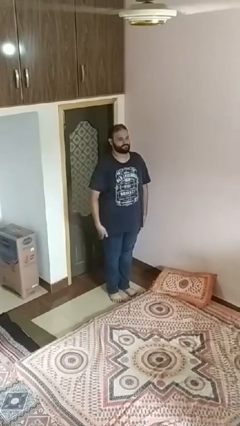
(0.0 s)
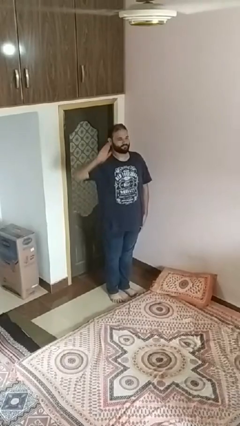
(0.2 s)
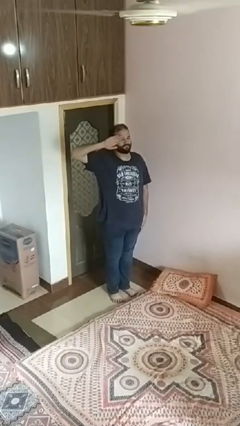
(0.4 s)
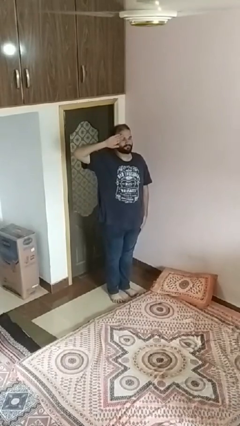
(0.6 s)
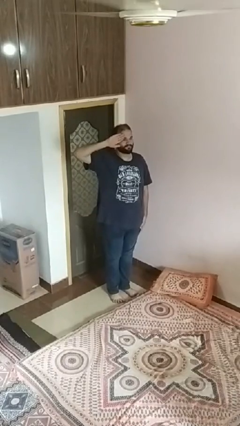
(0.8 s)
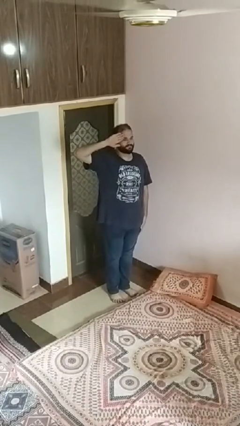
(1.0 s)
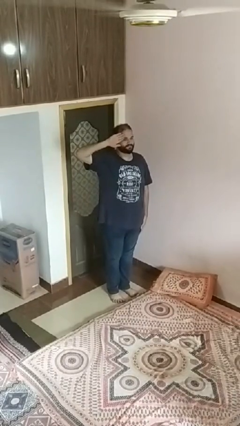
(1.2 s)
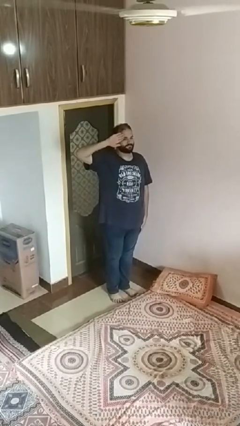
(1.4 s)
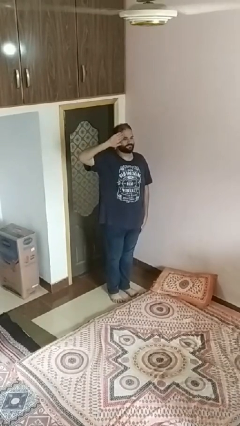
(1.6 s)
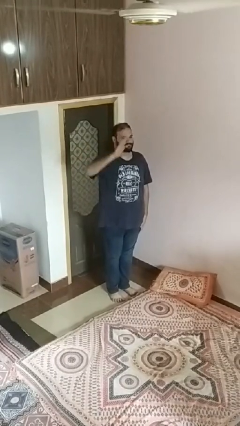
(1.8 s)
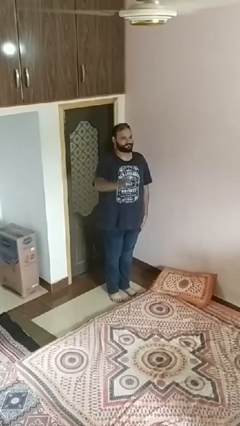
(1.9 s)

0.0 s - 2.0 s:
person salutes

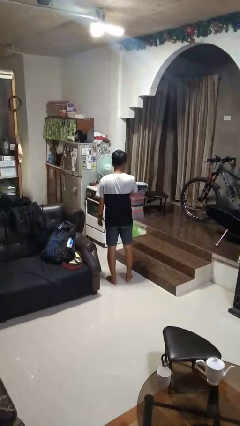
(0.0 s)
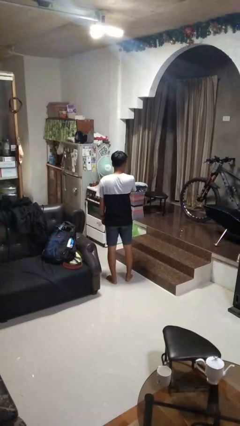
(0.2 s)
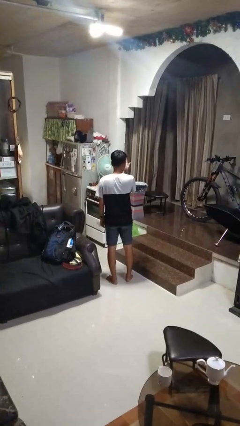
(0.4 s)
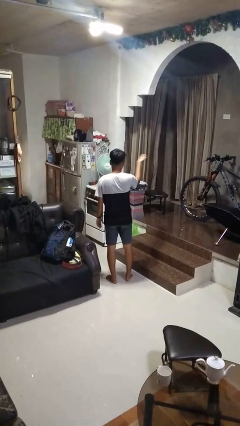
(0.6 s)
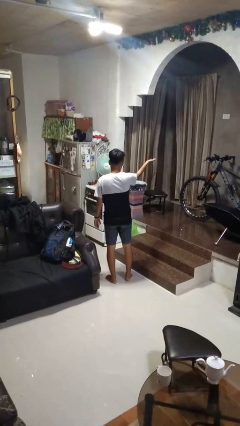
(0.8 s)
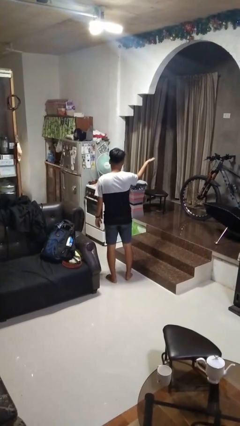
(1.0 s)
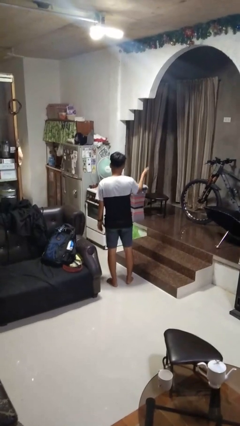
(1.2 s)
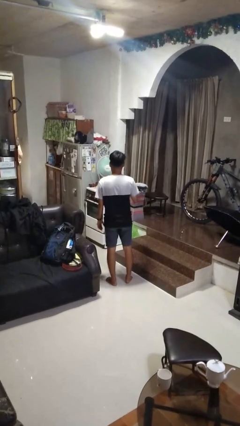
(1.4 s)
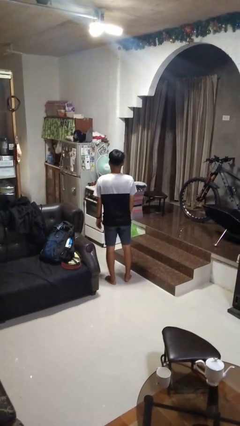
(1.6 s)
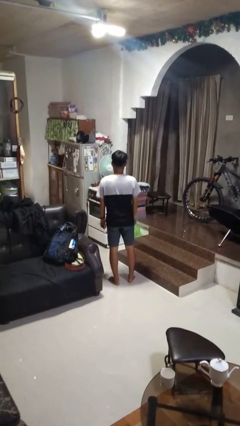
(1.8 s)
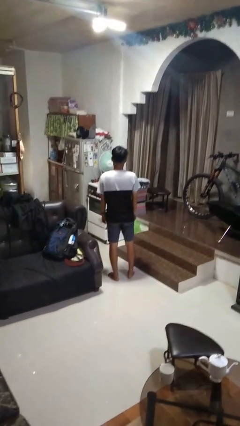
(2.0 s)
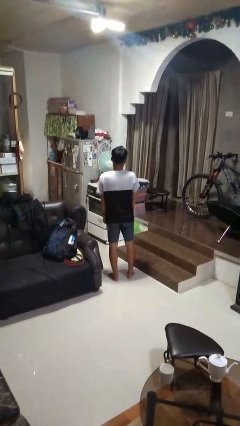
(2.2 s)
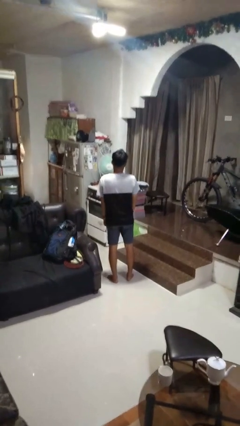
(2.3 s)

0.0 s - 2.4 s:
person gestures blow kiss

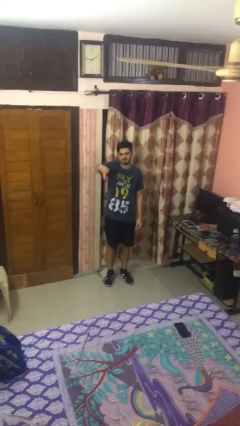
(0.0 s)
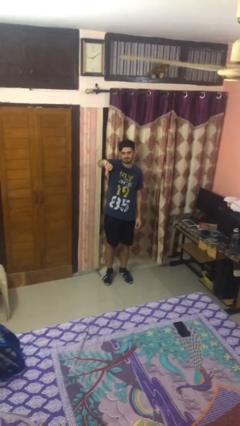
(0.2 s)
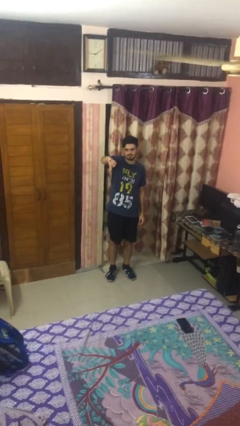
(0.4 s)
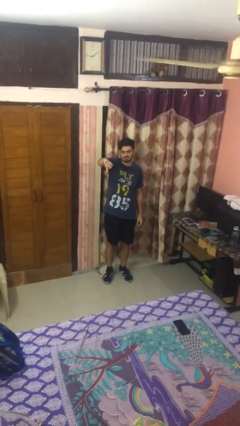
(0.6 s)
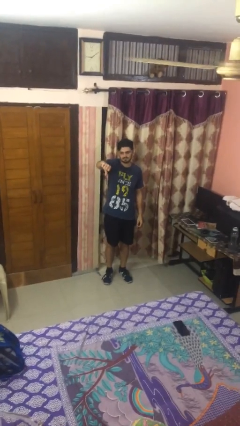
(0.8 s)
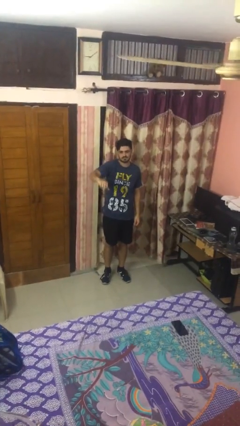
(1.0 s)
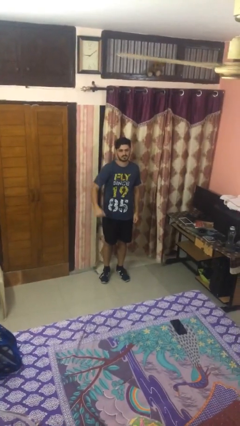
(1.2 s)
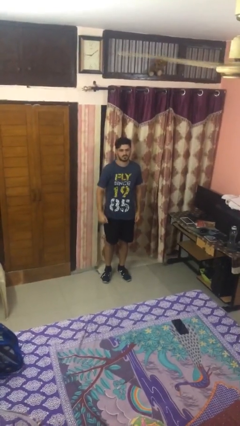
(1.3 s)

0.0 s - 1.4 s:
person gestures thumbs down

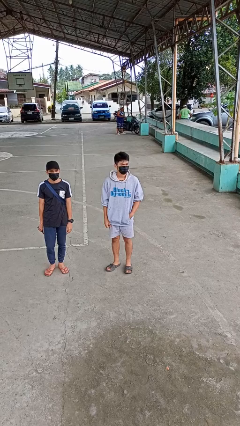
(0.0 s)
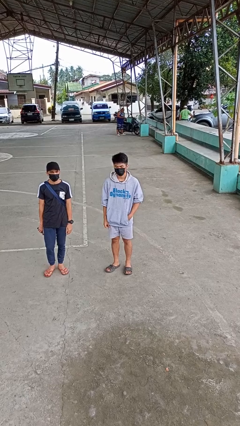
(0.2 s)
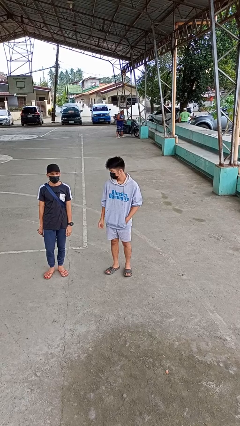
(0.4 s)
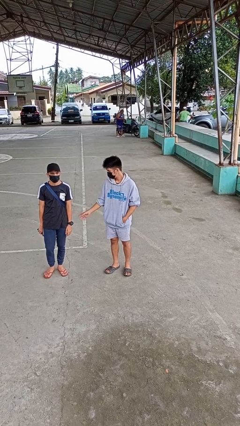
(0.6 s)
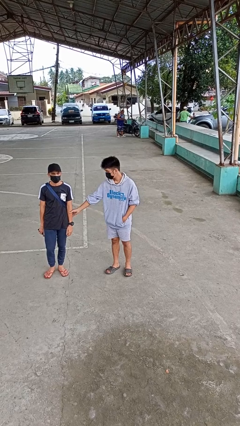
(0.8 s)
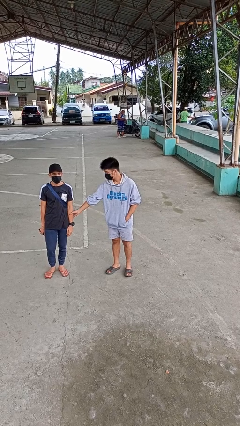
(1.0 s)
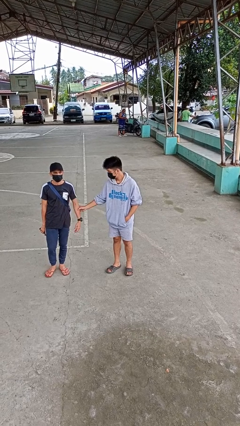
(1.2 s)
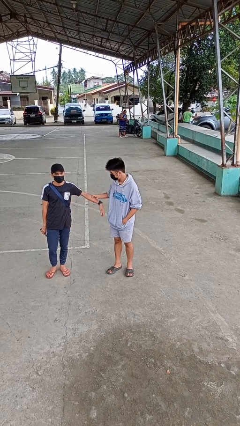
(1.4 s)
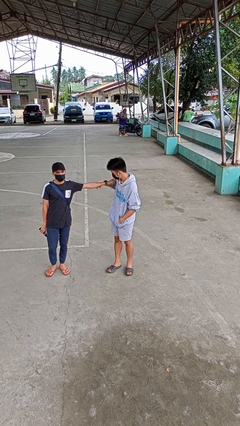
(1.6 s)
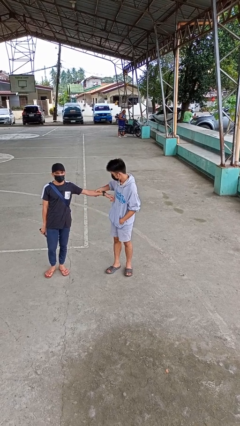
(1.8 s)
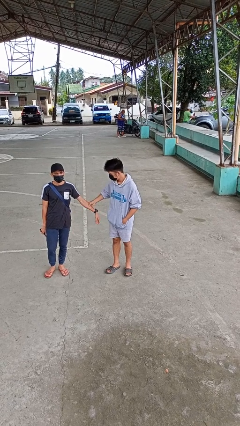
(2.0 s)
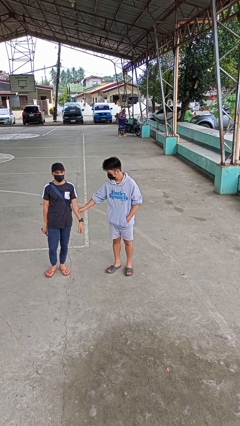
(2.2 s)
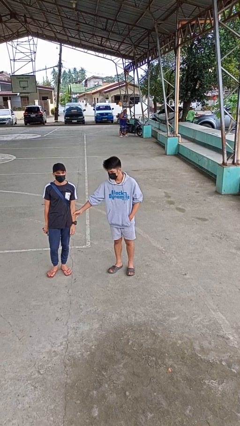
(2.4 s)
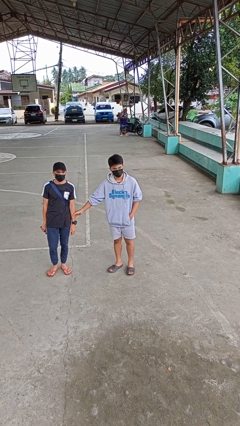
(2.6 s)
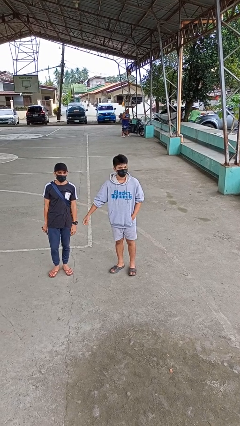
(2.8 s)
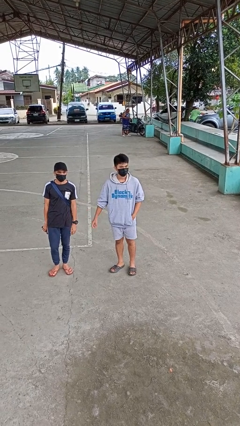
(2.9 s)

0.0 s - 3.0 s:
person grabs person by forearm

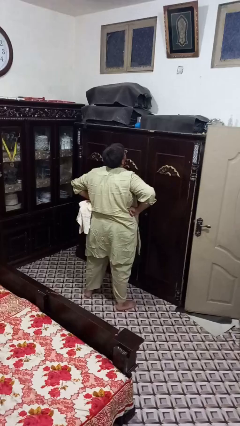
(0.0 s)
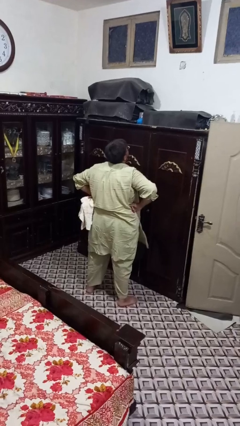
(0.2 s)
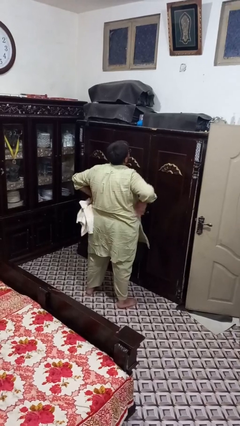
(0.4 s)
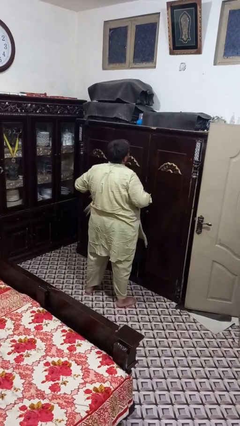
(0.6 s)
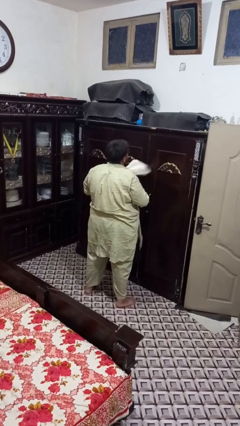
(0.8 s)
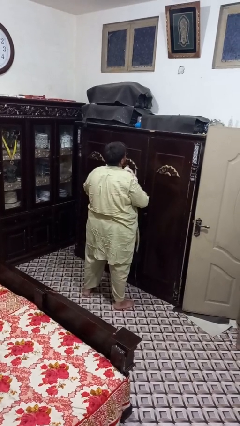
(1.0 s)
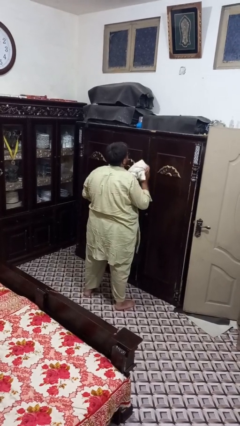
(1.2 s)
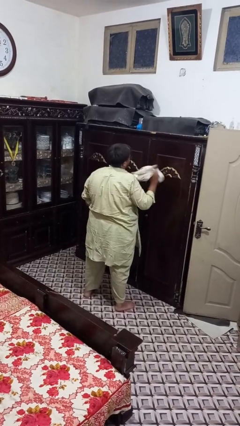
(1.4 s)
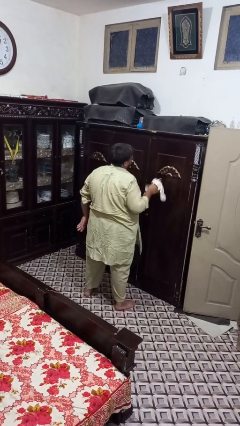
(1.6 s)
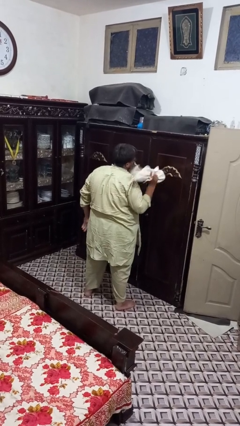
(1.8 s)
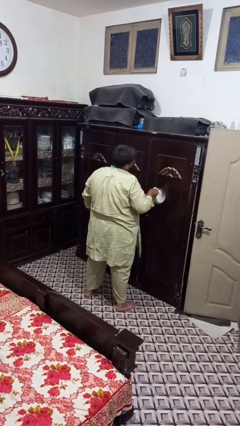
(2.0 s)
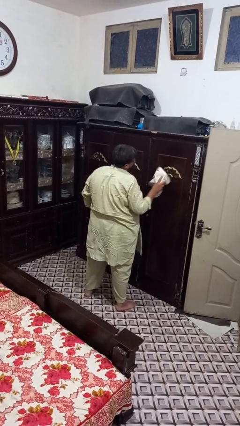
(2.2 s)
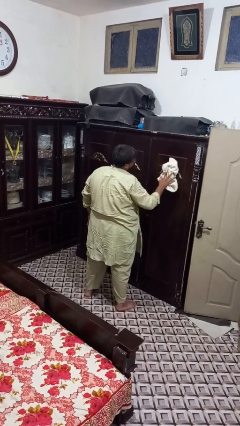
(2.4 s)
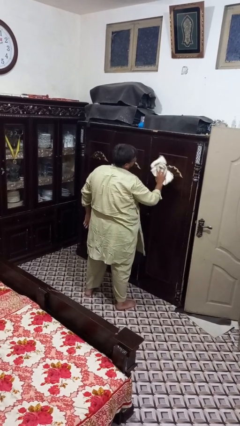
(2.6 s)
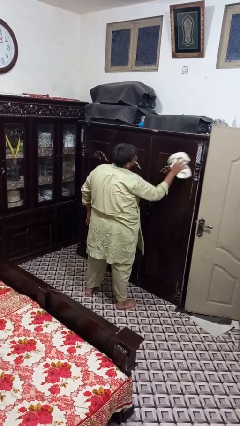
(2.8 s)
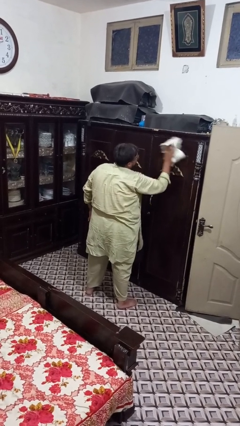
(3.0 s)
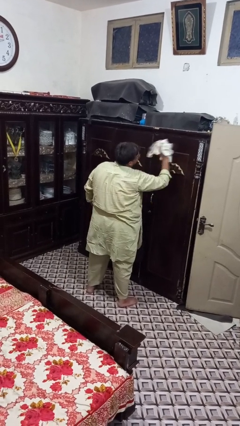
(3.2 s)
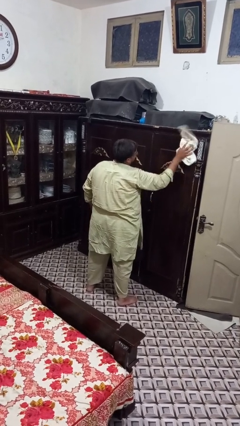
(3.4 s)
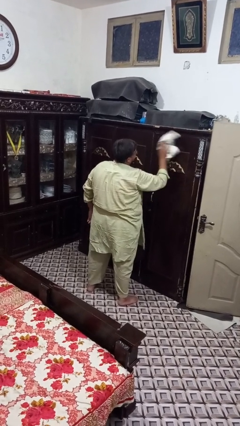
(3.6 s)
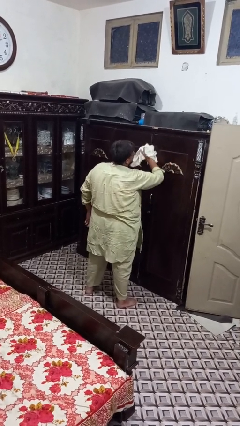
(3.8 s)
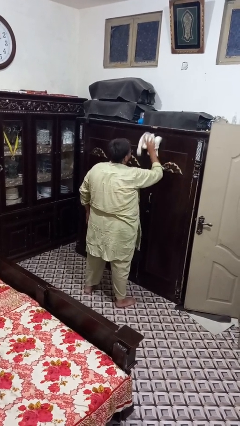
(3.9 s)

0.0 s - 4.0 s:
person dusts furniture

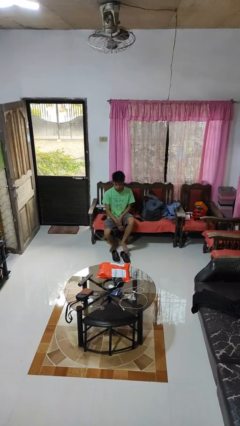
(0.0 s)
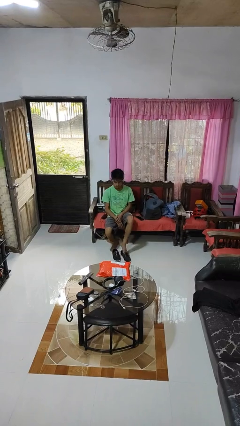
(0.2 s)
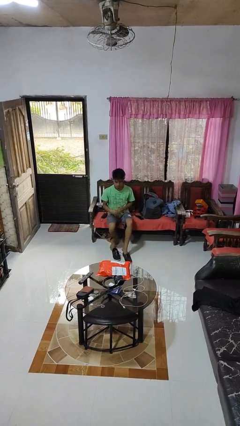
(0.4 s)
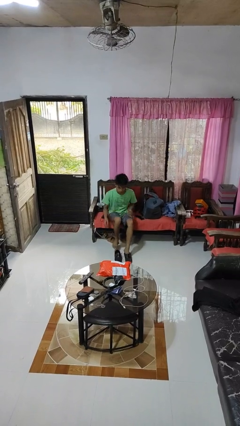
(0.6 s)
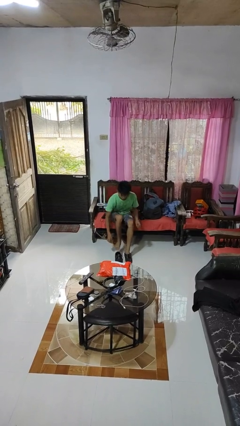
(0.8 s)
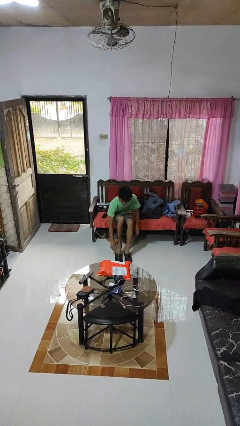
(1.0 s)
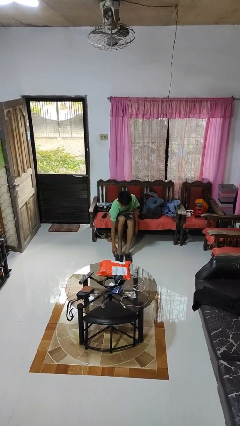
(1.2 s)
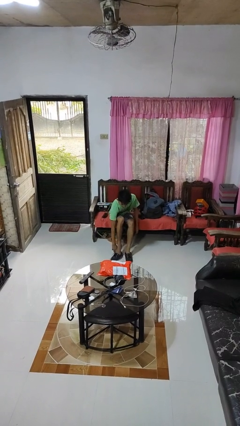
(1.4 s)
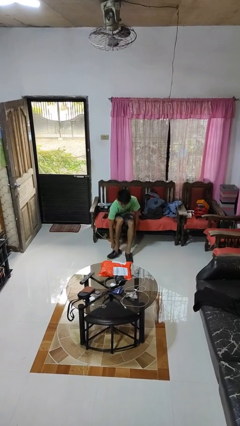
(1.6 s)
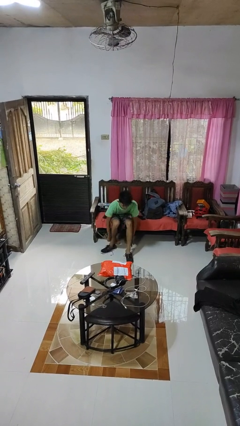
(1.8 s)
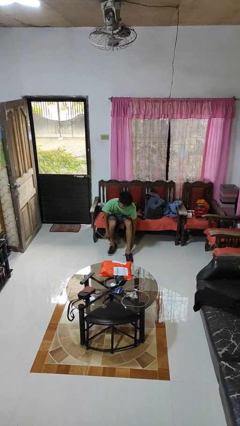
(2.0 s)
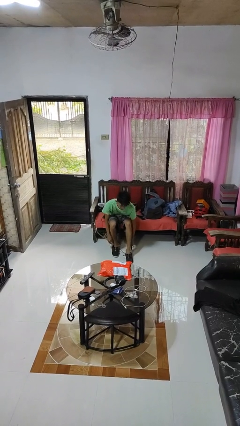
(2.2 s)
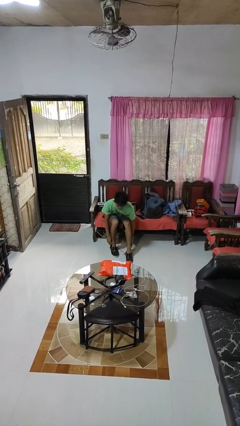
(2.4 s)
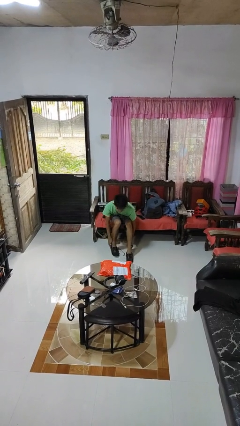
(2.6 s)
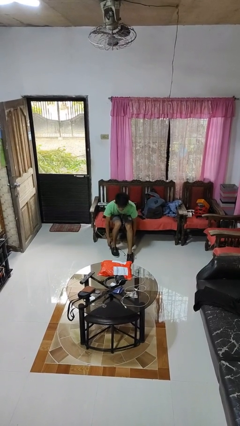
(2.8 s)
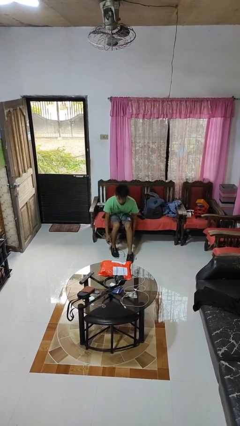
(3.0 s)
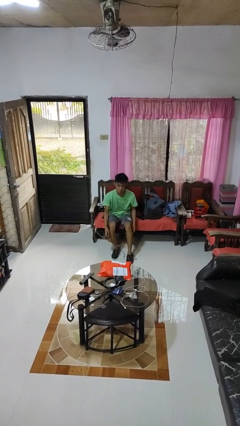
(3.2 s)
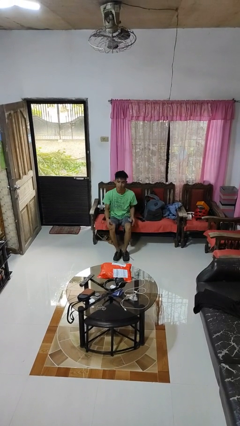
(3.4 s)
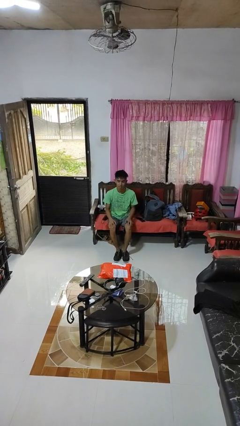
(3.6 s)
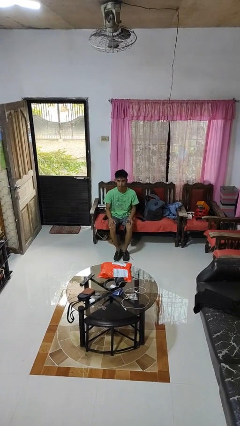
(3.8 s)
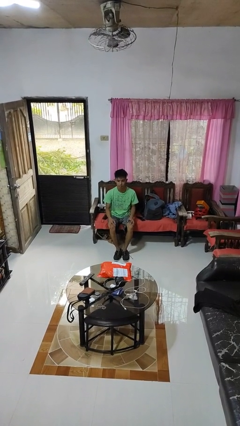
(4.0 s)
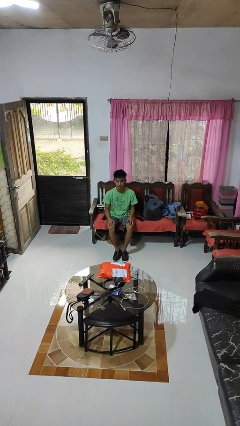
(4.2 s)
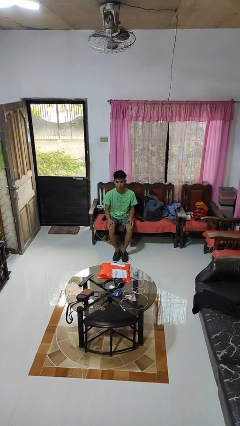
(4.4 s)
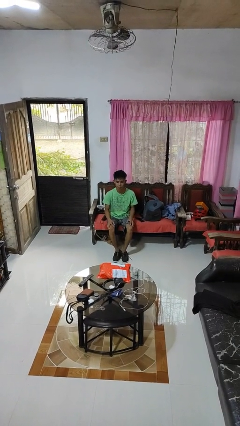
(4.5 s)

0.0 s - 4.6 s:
person puts on shoes
